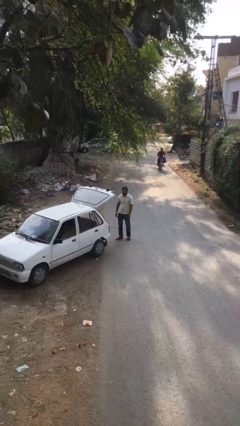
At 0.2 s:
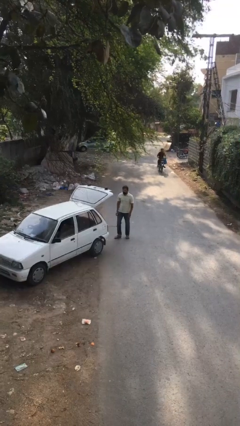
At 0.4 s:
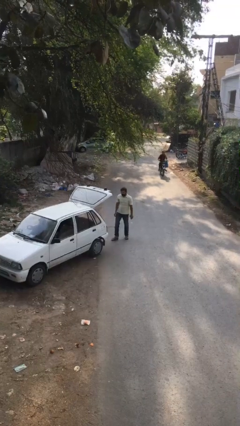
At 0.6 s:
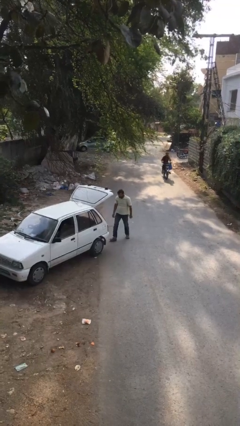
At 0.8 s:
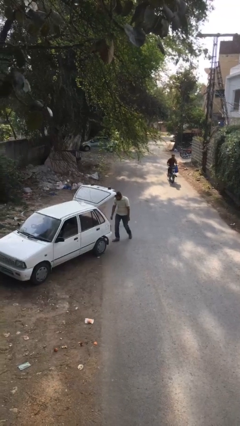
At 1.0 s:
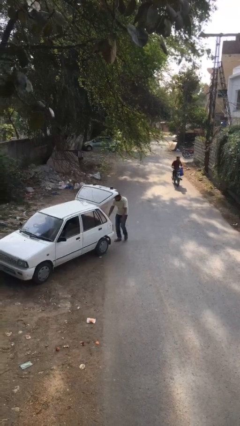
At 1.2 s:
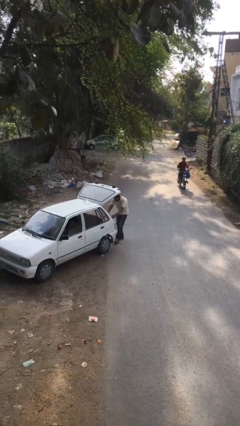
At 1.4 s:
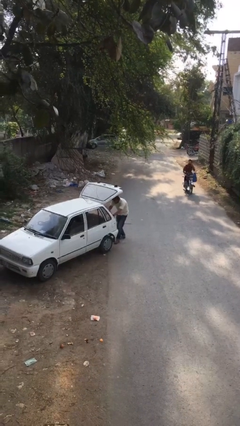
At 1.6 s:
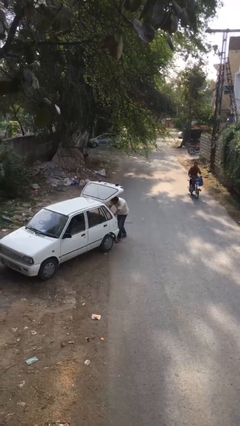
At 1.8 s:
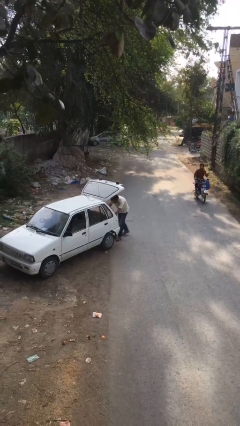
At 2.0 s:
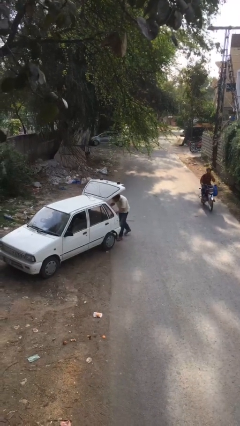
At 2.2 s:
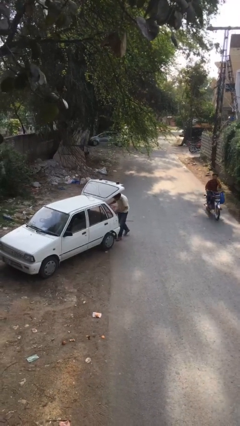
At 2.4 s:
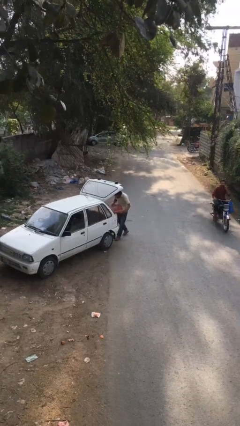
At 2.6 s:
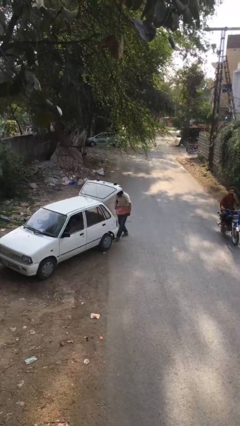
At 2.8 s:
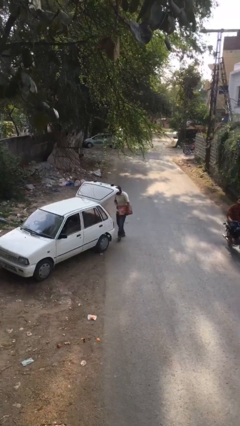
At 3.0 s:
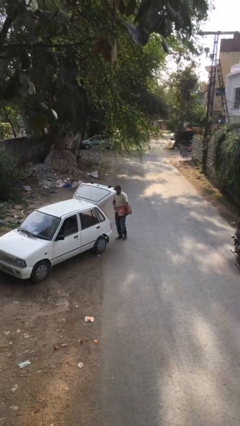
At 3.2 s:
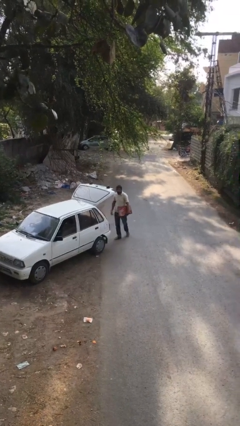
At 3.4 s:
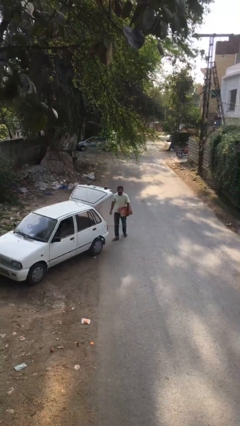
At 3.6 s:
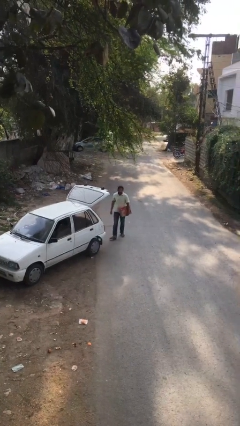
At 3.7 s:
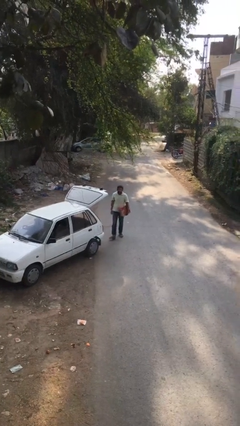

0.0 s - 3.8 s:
person unloads car

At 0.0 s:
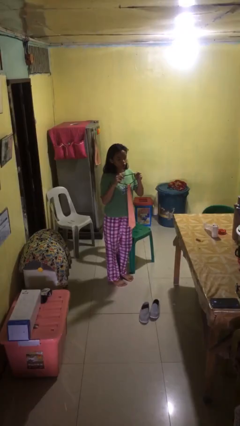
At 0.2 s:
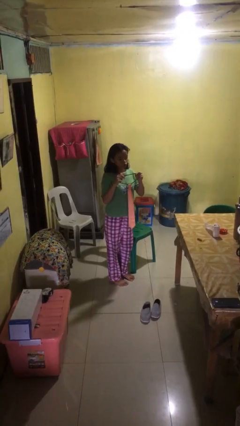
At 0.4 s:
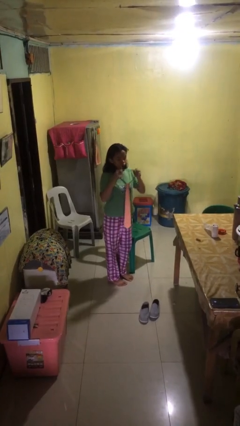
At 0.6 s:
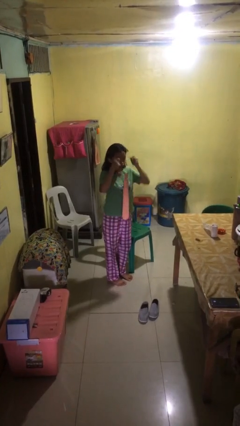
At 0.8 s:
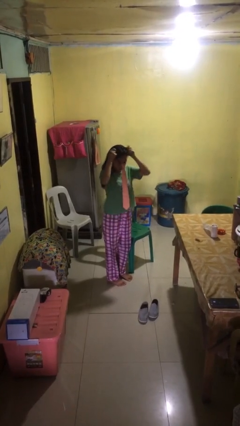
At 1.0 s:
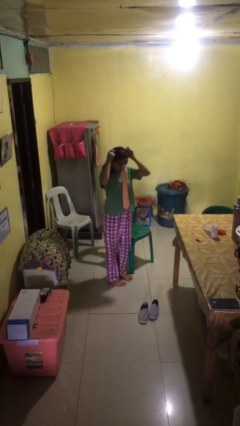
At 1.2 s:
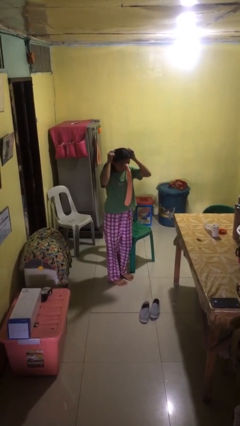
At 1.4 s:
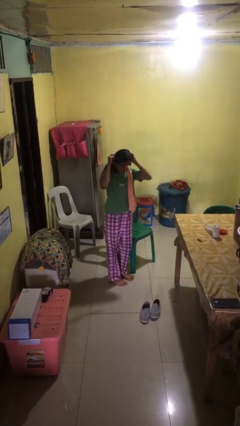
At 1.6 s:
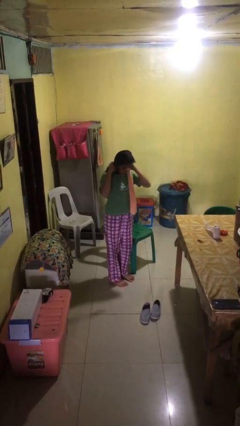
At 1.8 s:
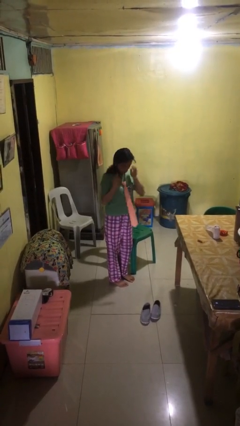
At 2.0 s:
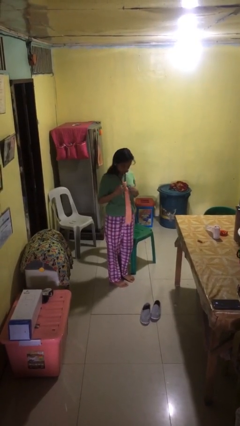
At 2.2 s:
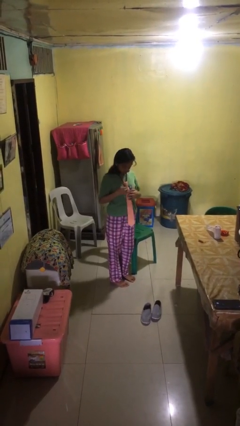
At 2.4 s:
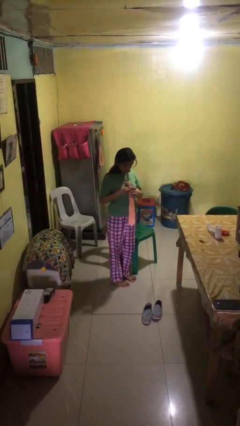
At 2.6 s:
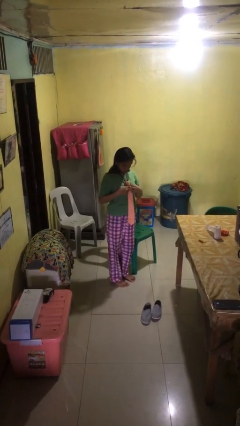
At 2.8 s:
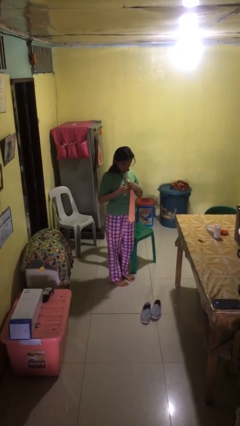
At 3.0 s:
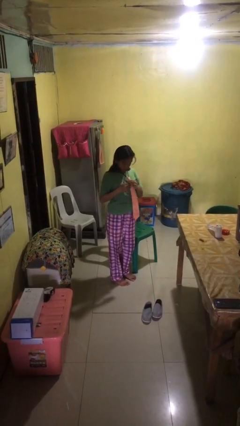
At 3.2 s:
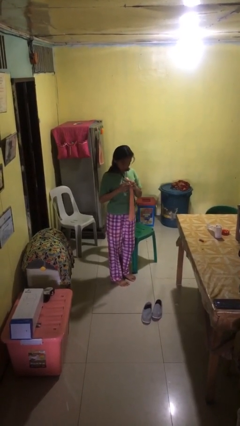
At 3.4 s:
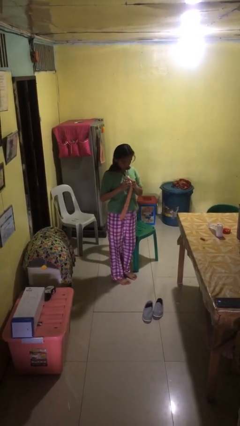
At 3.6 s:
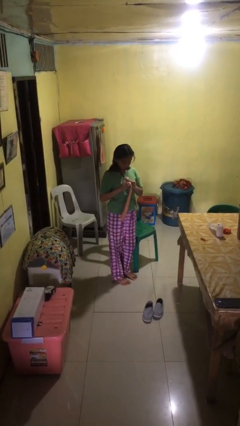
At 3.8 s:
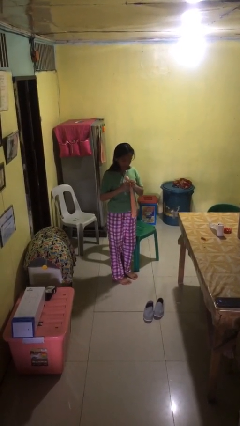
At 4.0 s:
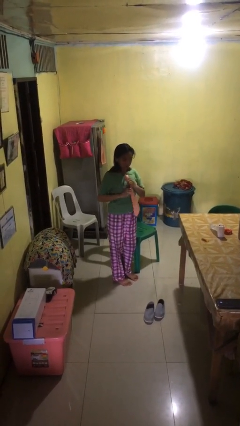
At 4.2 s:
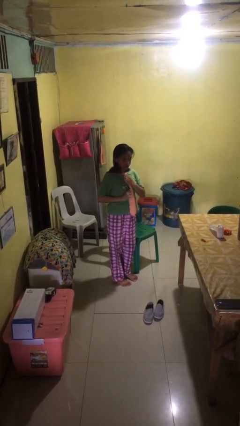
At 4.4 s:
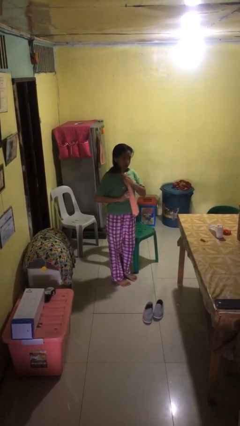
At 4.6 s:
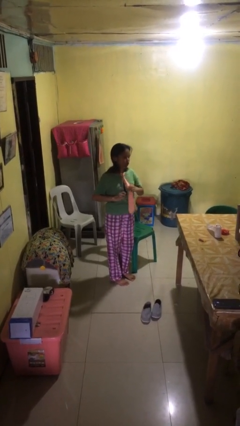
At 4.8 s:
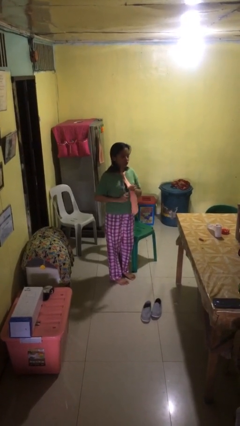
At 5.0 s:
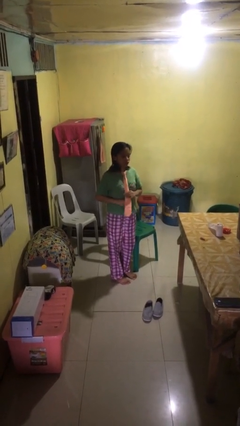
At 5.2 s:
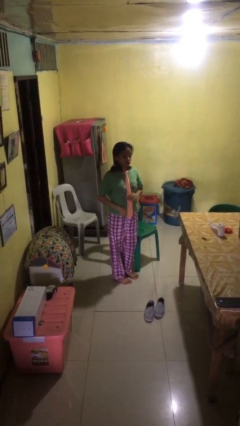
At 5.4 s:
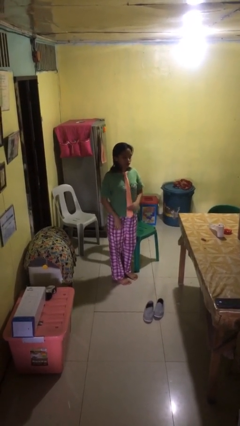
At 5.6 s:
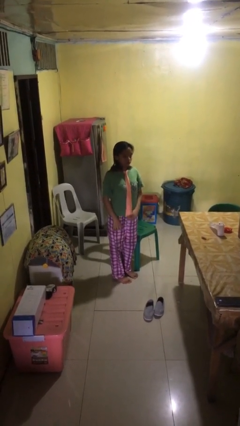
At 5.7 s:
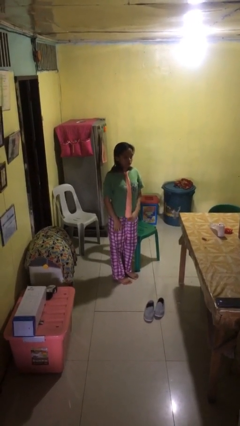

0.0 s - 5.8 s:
person puts on necktie

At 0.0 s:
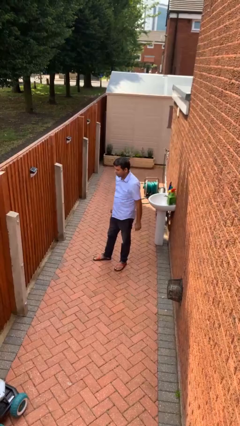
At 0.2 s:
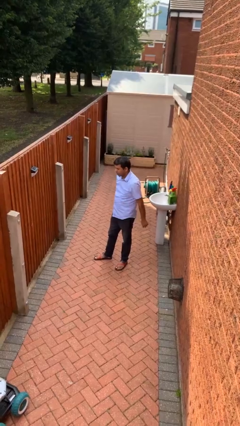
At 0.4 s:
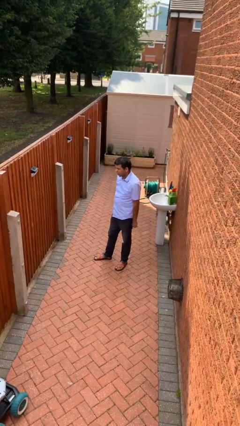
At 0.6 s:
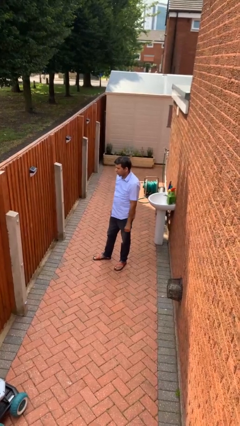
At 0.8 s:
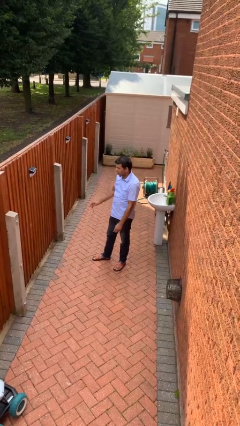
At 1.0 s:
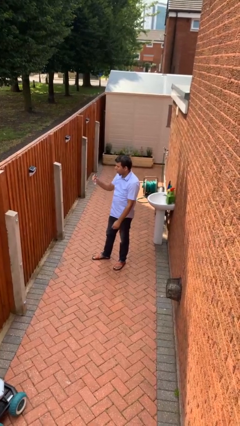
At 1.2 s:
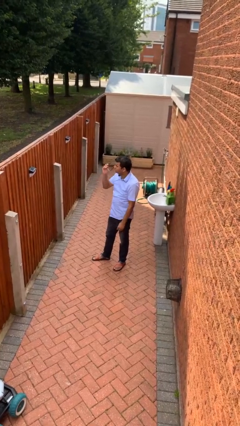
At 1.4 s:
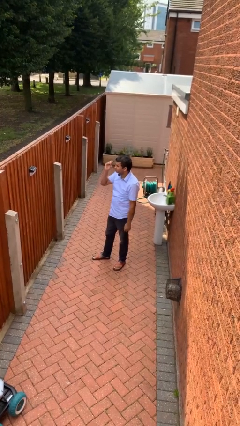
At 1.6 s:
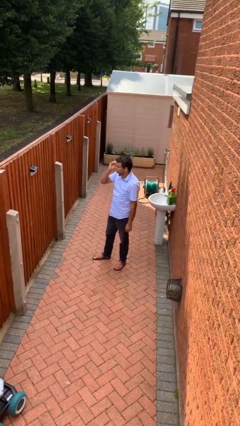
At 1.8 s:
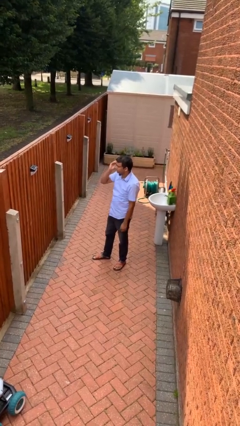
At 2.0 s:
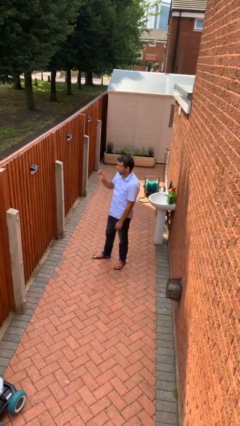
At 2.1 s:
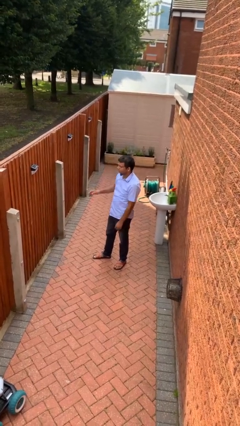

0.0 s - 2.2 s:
person puts on glasses

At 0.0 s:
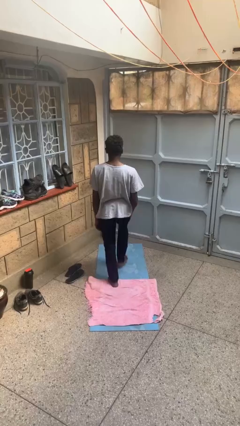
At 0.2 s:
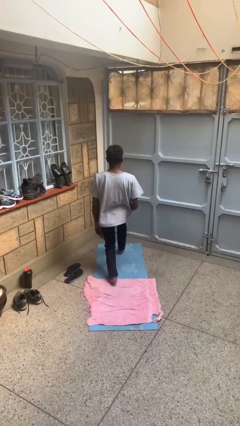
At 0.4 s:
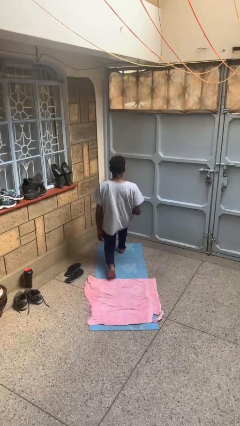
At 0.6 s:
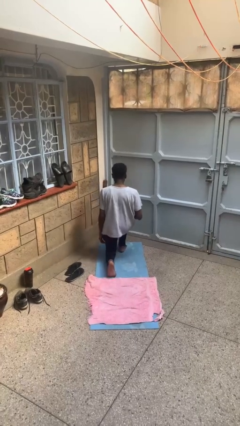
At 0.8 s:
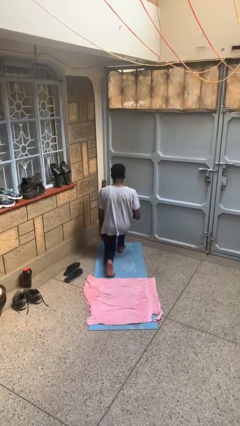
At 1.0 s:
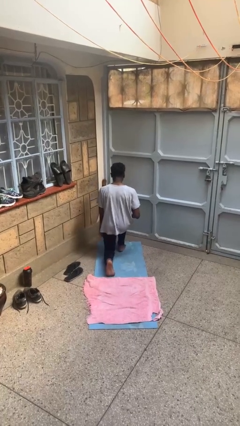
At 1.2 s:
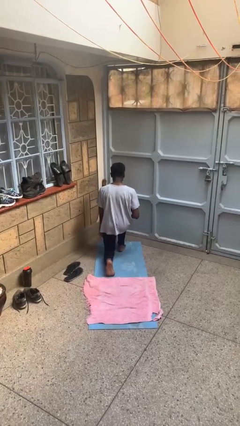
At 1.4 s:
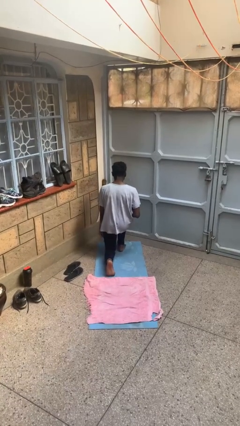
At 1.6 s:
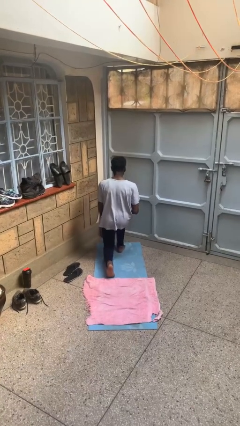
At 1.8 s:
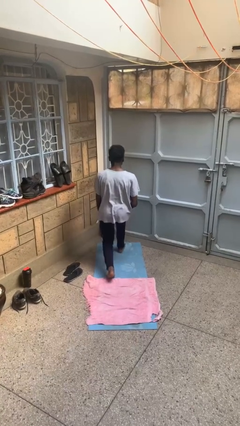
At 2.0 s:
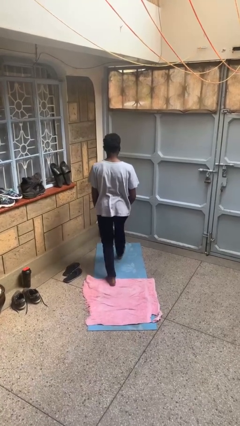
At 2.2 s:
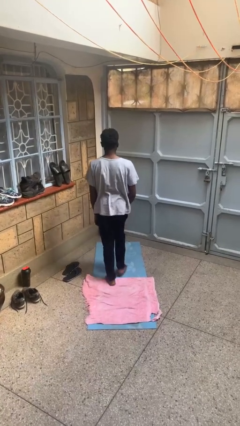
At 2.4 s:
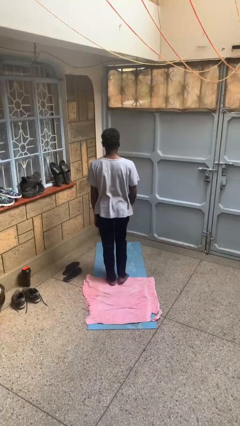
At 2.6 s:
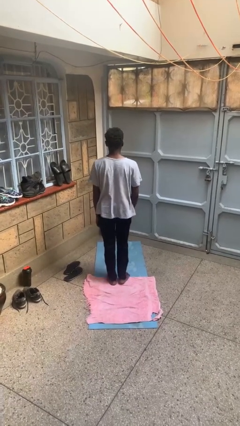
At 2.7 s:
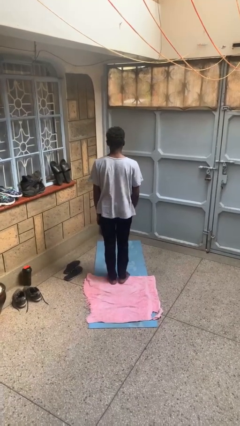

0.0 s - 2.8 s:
person exercises with lunges

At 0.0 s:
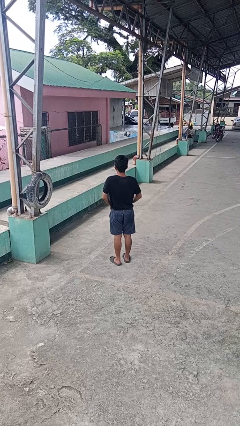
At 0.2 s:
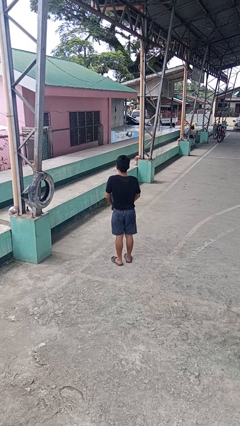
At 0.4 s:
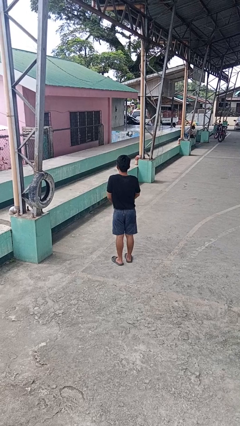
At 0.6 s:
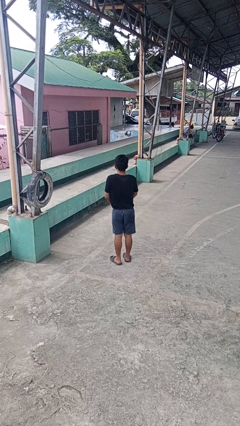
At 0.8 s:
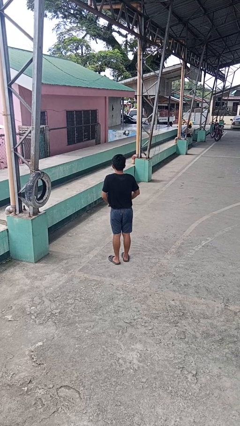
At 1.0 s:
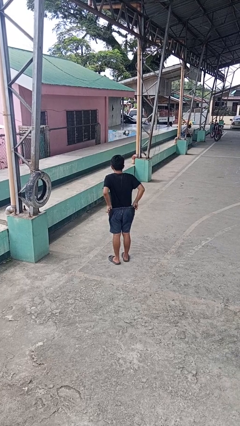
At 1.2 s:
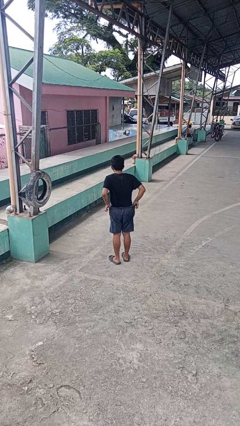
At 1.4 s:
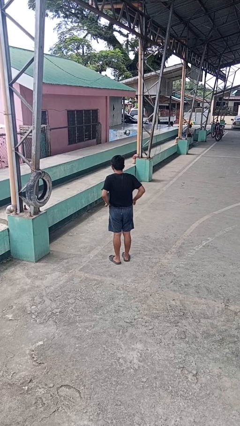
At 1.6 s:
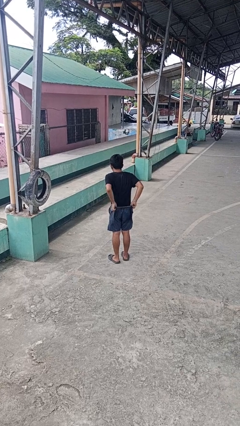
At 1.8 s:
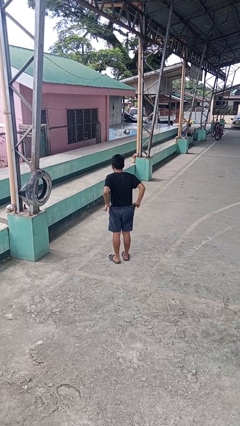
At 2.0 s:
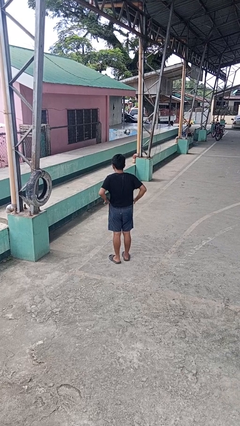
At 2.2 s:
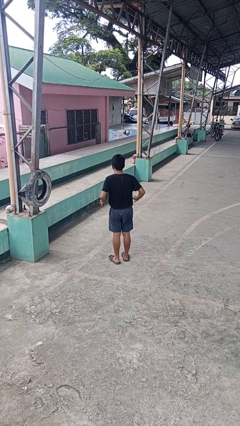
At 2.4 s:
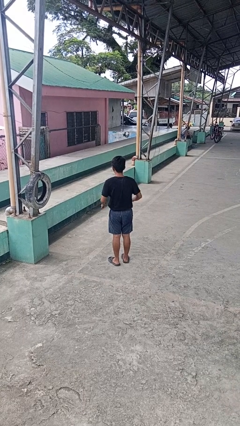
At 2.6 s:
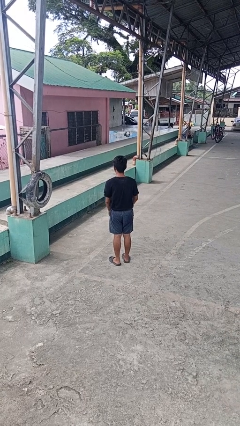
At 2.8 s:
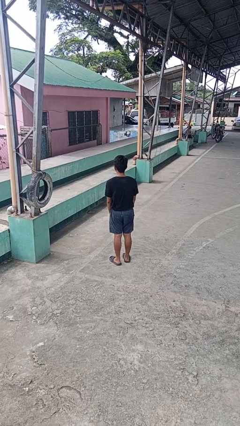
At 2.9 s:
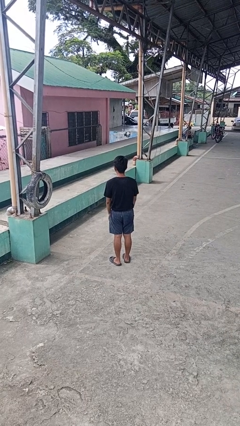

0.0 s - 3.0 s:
person hikes up pants

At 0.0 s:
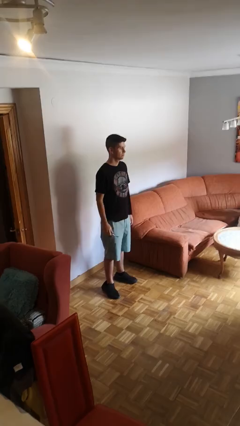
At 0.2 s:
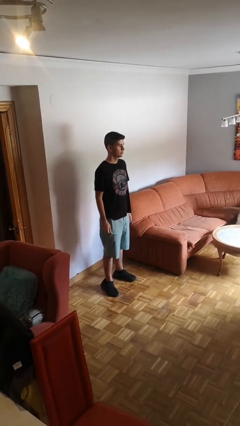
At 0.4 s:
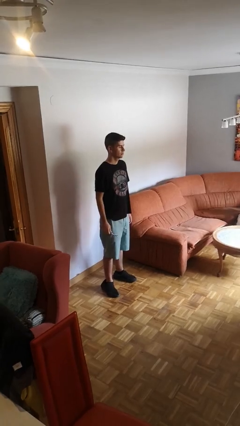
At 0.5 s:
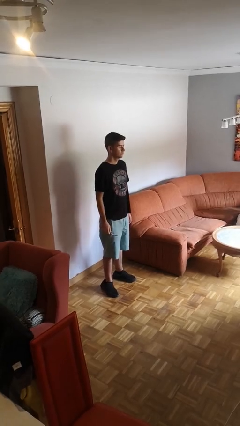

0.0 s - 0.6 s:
person brushes teeth
